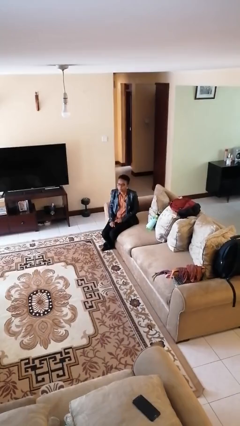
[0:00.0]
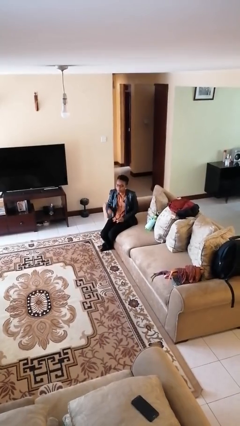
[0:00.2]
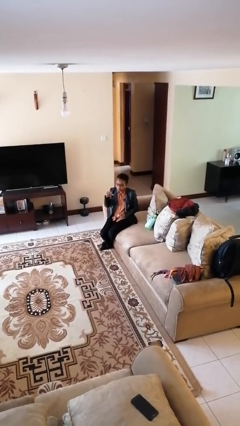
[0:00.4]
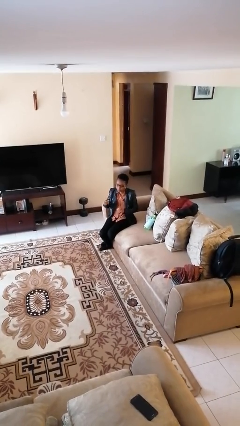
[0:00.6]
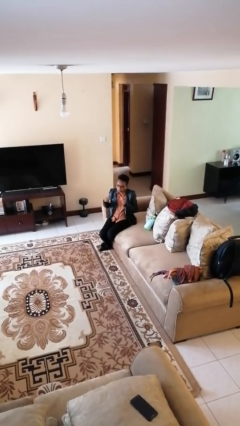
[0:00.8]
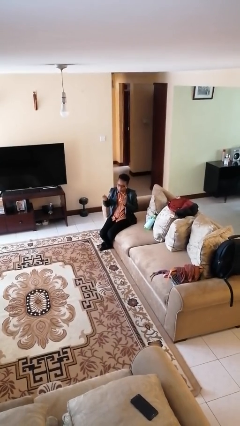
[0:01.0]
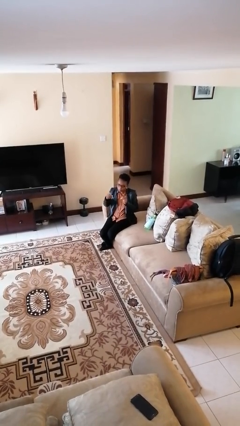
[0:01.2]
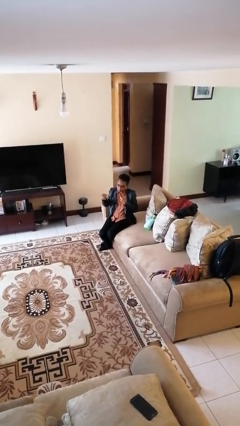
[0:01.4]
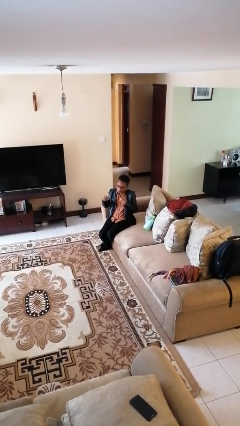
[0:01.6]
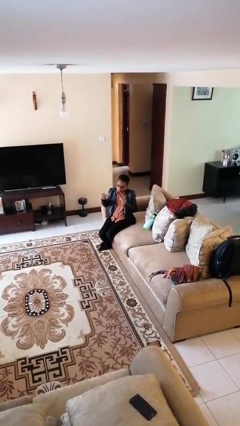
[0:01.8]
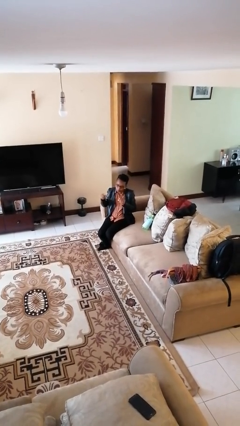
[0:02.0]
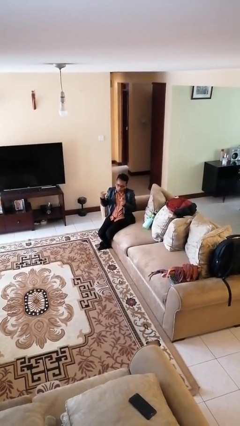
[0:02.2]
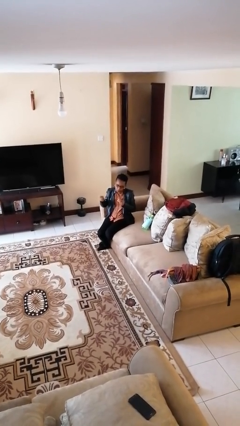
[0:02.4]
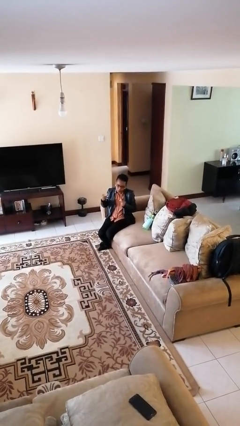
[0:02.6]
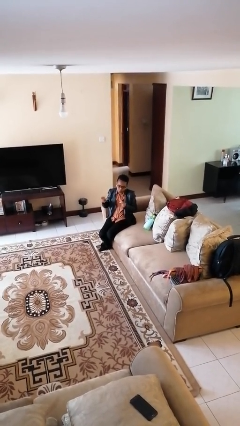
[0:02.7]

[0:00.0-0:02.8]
person snaps fingers

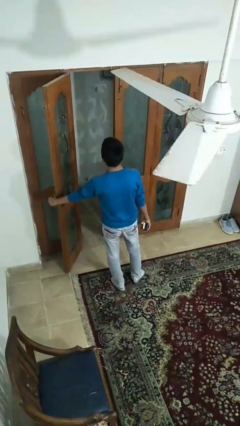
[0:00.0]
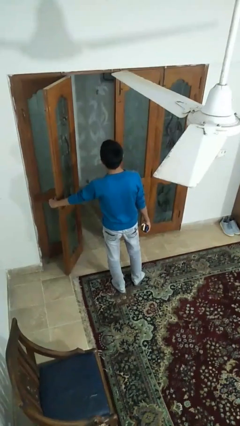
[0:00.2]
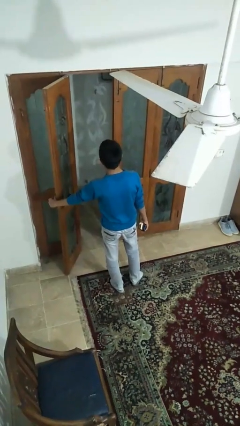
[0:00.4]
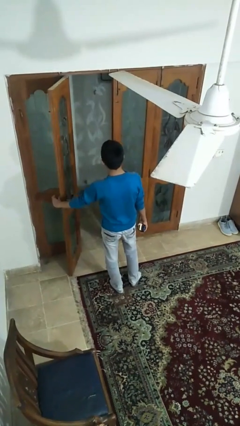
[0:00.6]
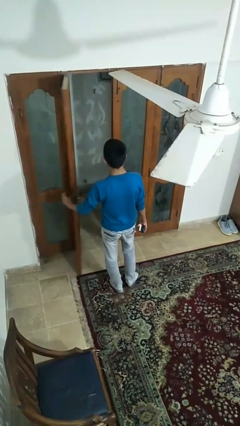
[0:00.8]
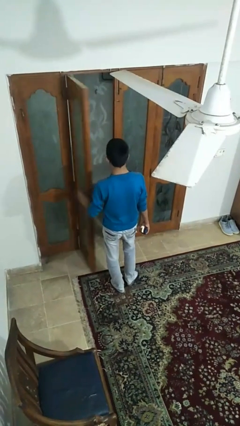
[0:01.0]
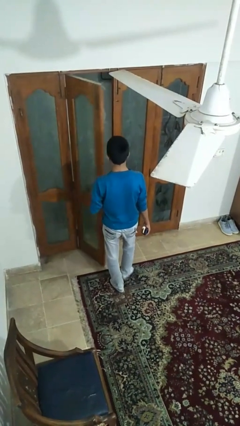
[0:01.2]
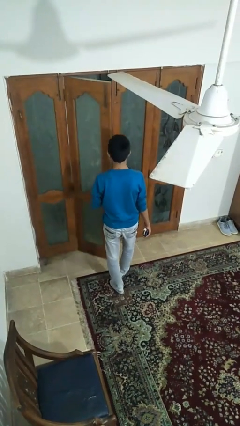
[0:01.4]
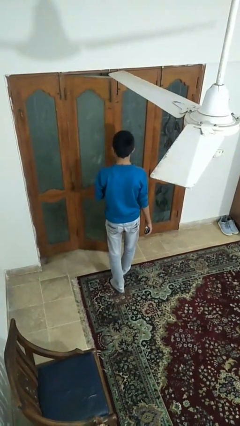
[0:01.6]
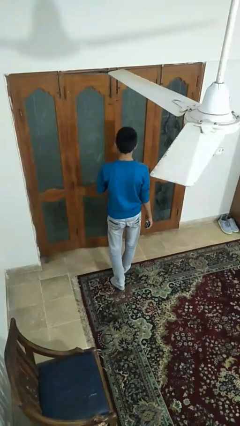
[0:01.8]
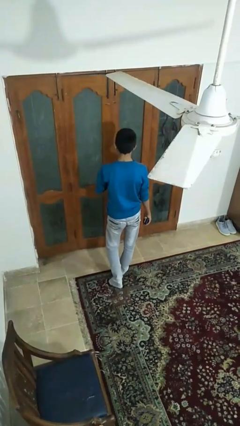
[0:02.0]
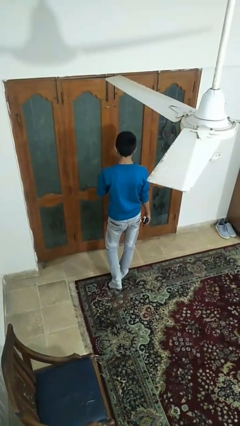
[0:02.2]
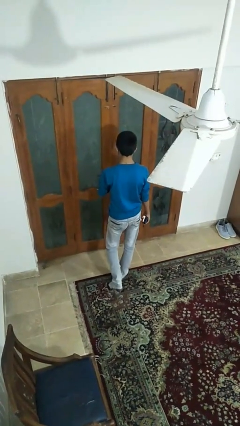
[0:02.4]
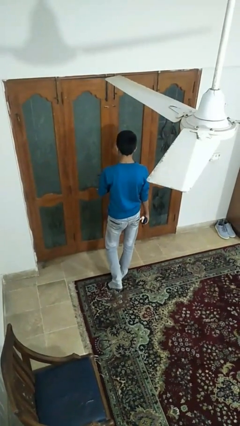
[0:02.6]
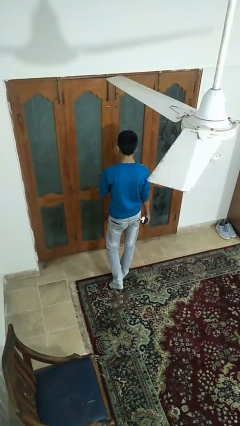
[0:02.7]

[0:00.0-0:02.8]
person closes facility door

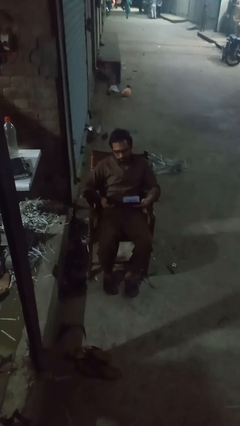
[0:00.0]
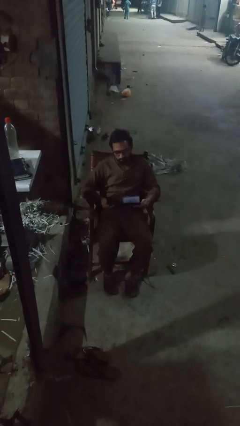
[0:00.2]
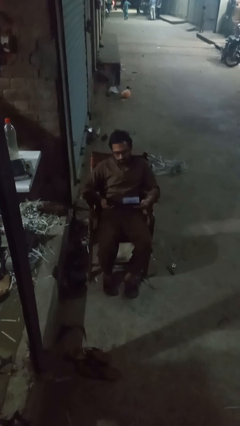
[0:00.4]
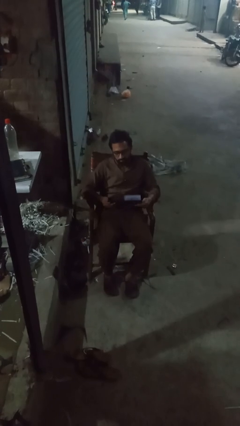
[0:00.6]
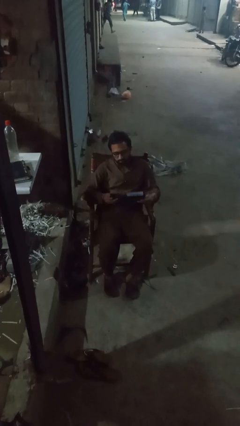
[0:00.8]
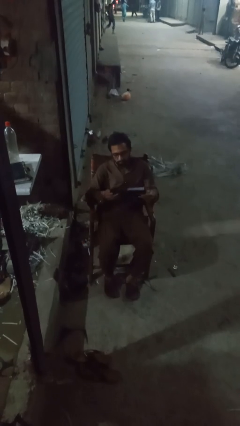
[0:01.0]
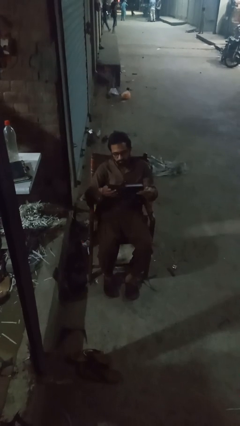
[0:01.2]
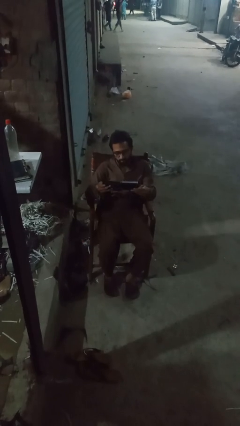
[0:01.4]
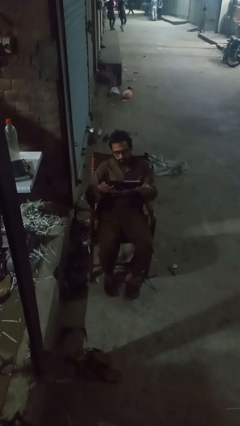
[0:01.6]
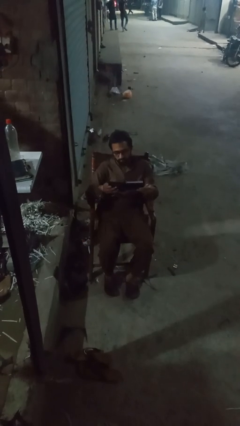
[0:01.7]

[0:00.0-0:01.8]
person interacts with handheld game

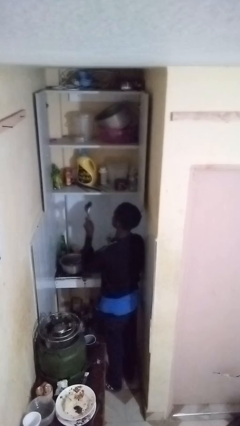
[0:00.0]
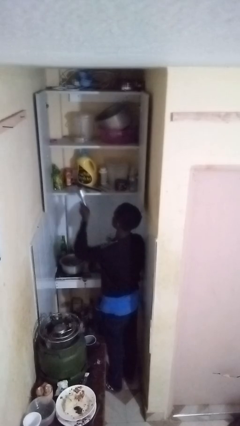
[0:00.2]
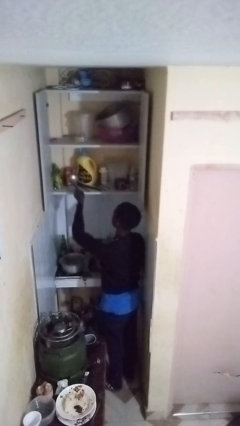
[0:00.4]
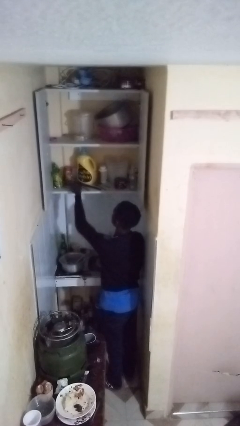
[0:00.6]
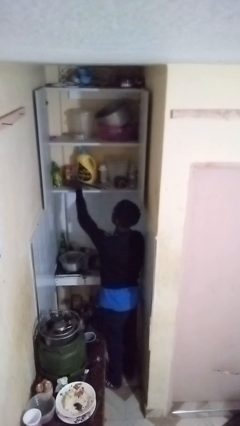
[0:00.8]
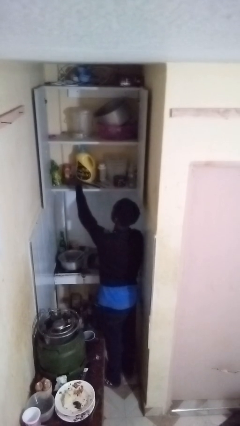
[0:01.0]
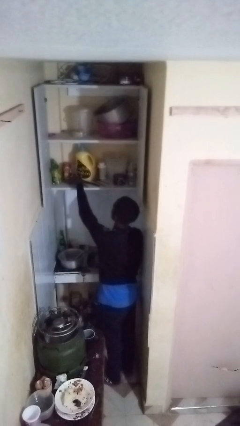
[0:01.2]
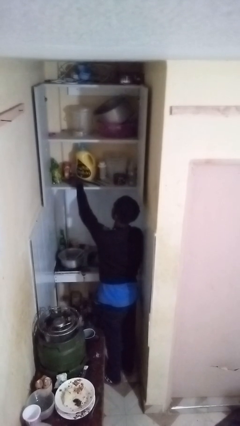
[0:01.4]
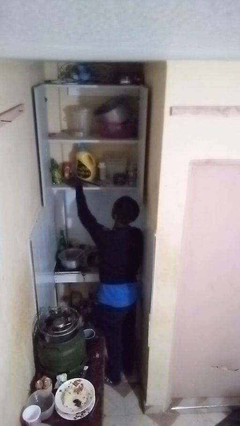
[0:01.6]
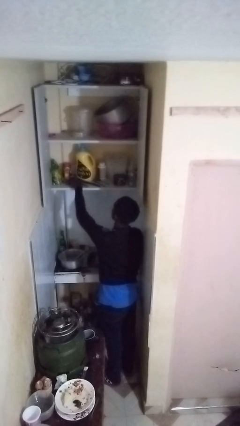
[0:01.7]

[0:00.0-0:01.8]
person puts object into kitchen drawer

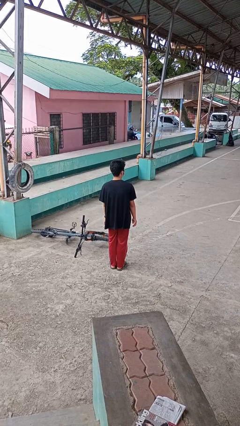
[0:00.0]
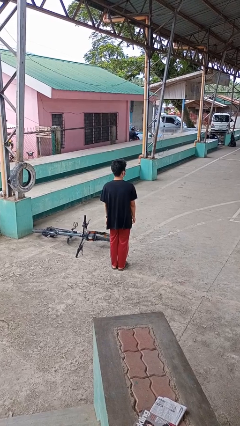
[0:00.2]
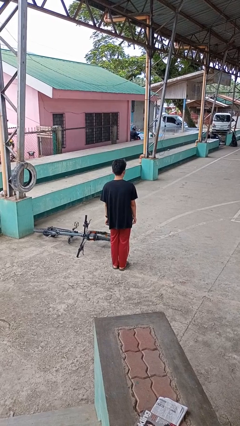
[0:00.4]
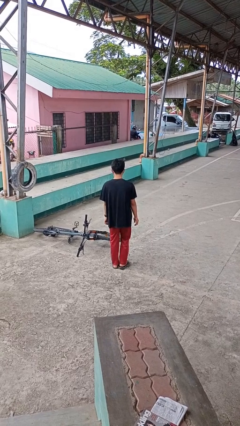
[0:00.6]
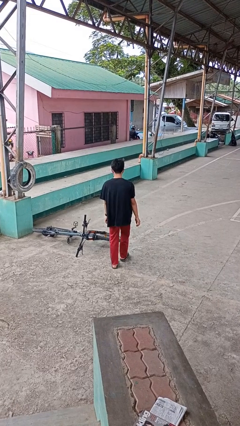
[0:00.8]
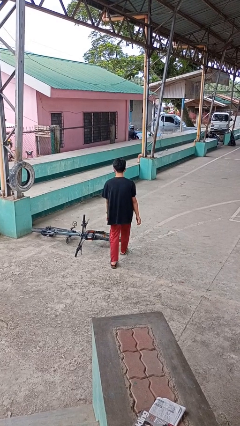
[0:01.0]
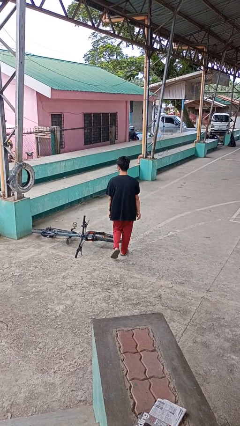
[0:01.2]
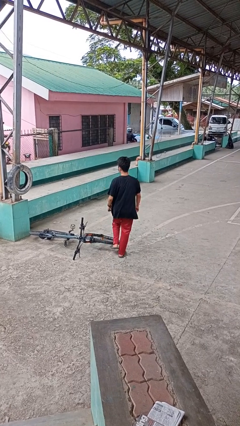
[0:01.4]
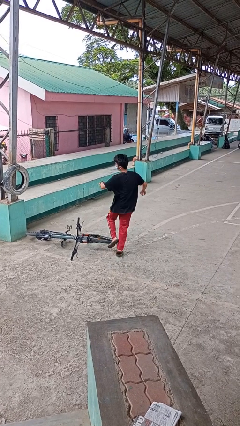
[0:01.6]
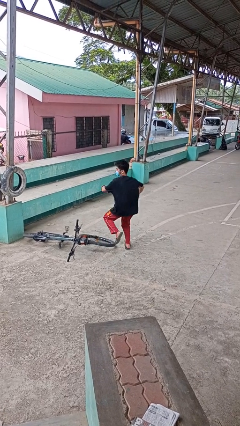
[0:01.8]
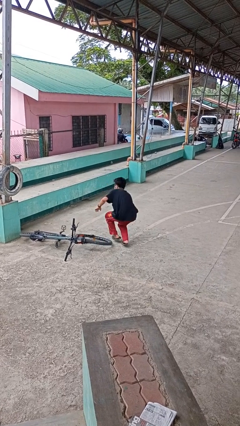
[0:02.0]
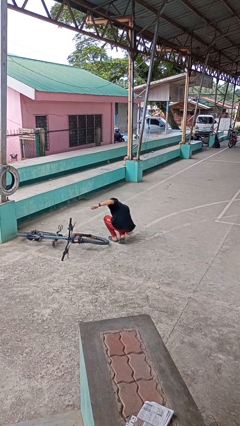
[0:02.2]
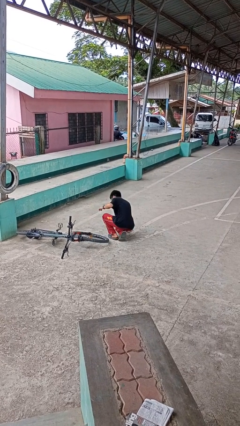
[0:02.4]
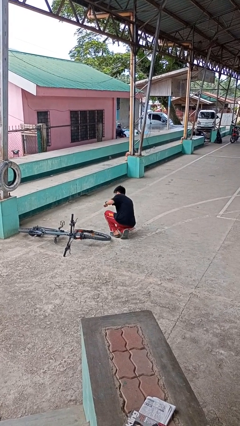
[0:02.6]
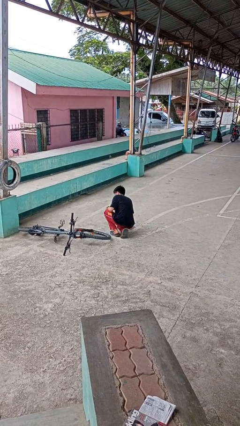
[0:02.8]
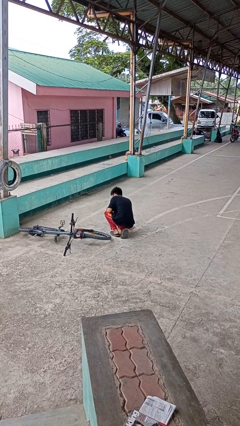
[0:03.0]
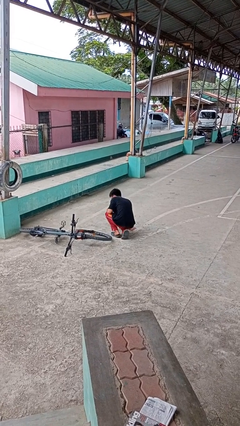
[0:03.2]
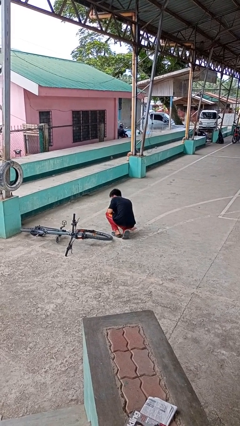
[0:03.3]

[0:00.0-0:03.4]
person trips on object on floor

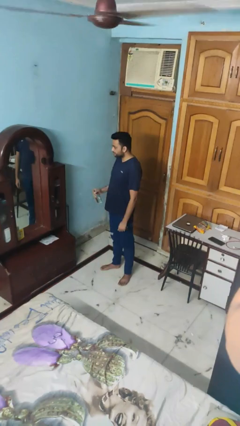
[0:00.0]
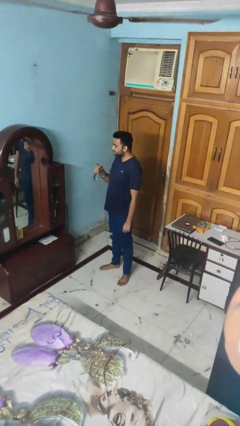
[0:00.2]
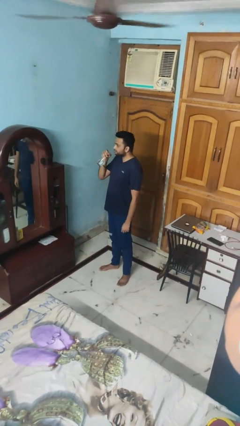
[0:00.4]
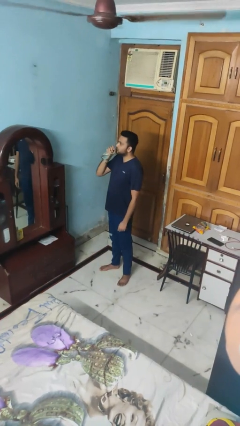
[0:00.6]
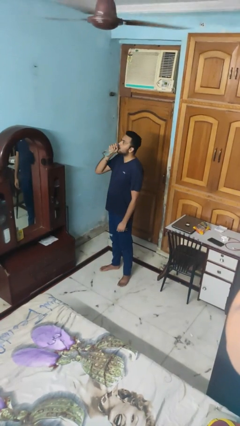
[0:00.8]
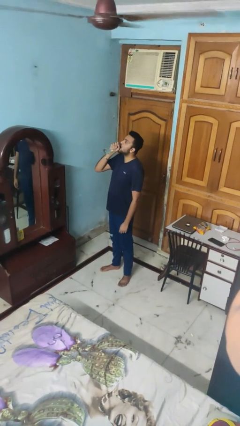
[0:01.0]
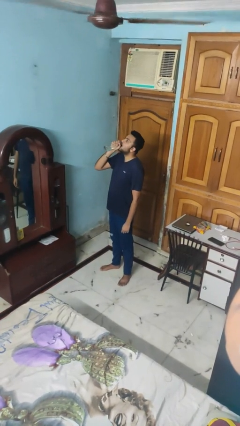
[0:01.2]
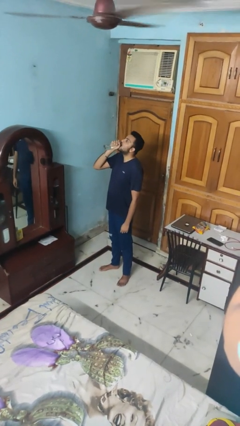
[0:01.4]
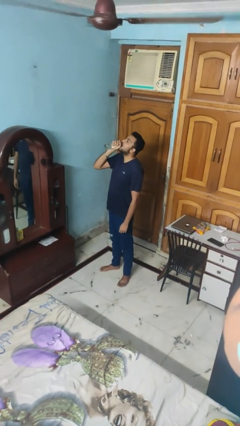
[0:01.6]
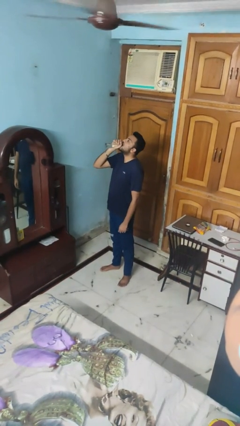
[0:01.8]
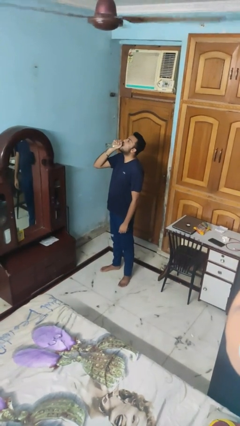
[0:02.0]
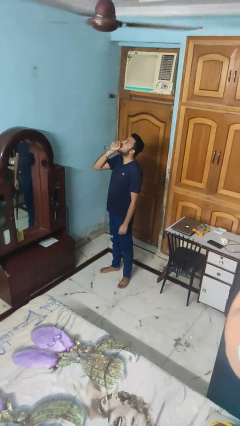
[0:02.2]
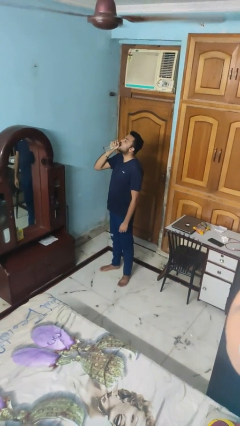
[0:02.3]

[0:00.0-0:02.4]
person drinks from bottle

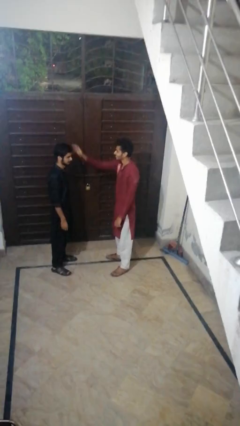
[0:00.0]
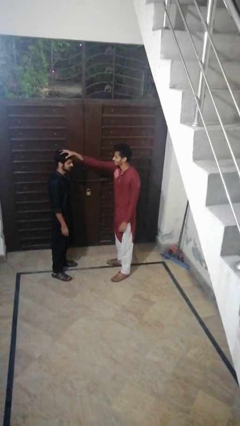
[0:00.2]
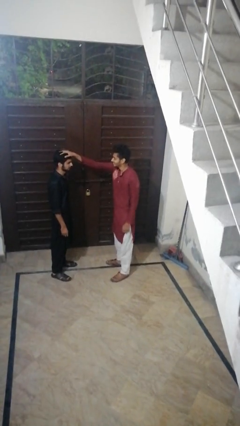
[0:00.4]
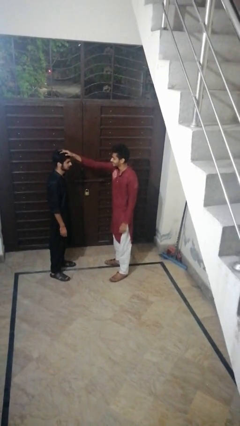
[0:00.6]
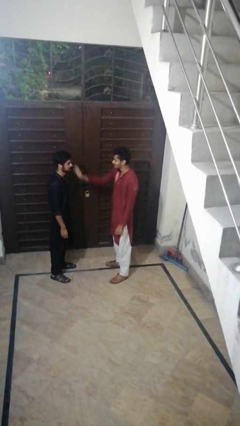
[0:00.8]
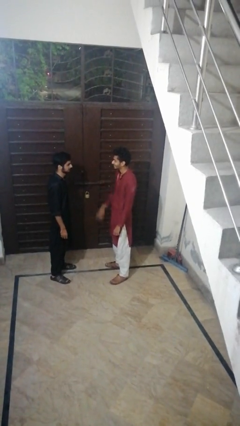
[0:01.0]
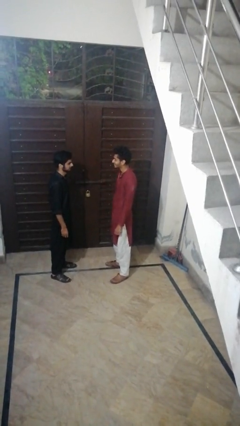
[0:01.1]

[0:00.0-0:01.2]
person grabs person by hair

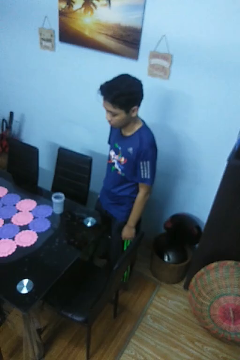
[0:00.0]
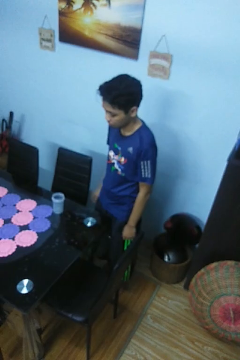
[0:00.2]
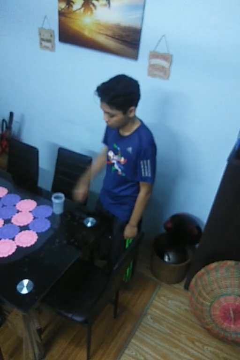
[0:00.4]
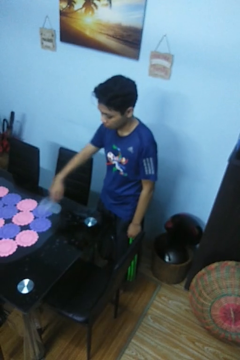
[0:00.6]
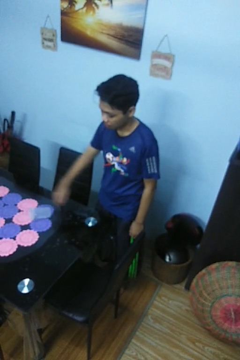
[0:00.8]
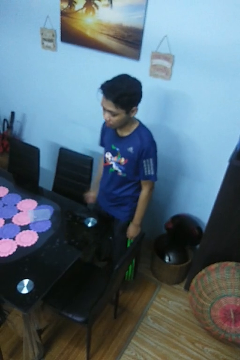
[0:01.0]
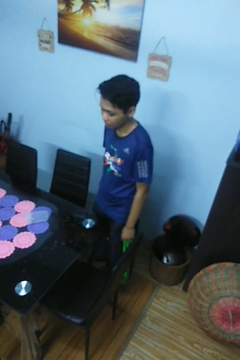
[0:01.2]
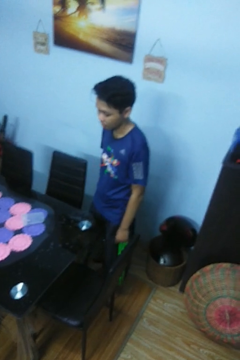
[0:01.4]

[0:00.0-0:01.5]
person knocks over glass
